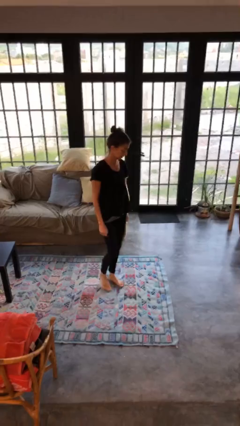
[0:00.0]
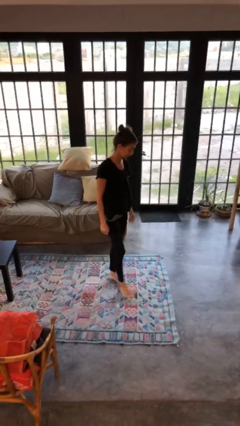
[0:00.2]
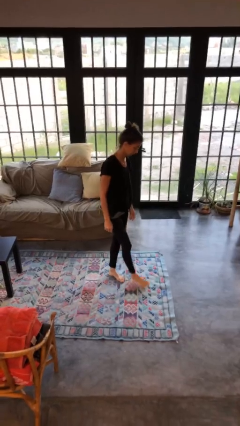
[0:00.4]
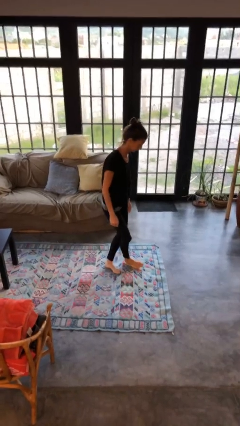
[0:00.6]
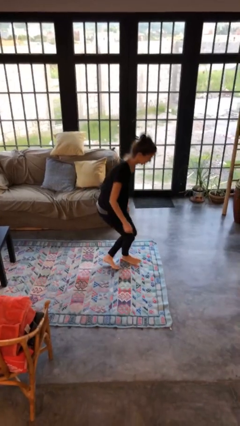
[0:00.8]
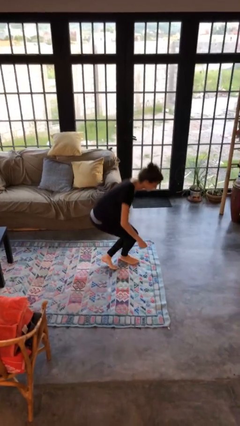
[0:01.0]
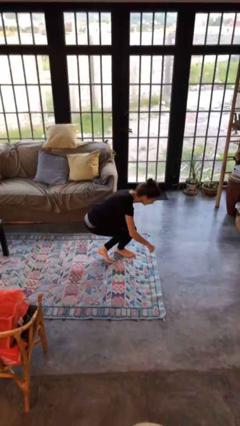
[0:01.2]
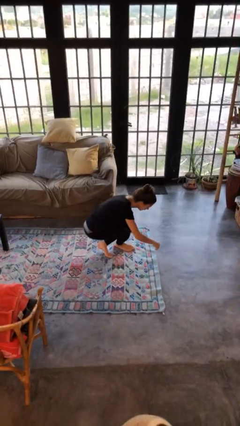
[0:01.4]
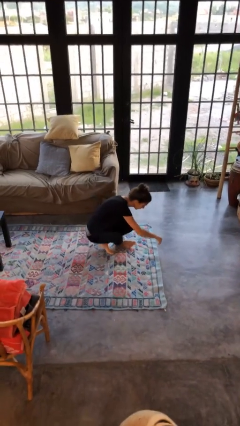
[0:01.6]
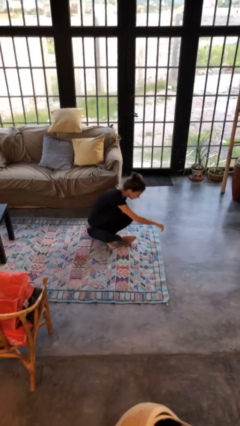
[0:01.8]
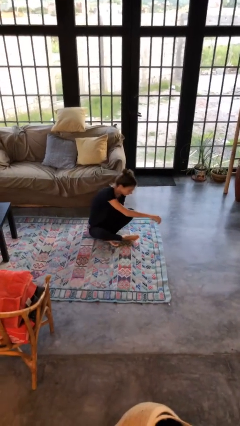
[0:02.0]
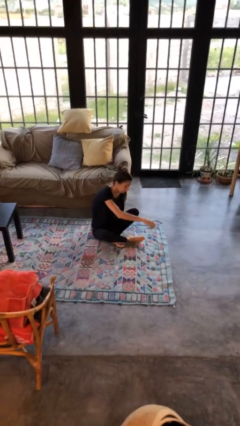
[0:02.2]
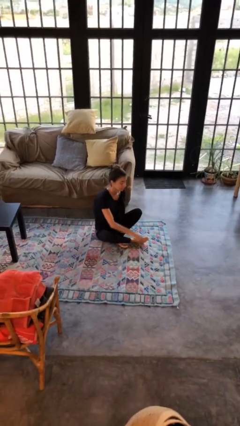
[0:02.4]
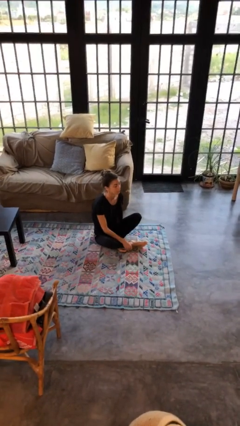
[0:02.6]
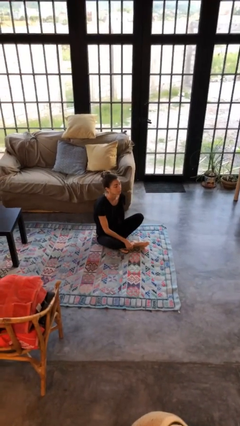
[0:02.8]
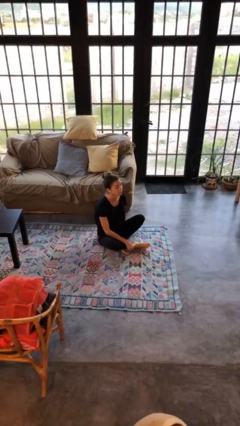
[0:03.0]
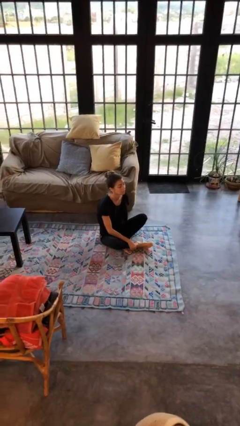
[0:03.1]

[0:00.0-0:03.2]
person sits crisscross

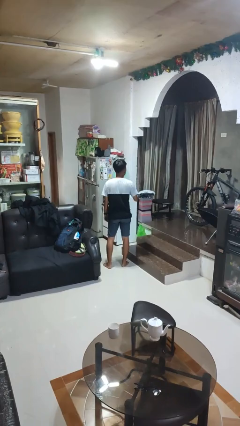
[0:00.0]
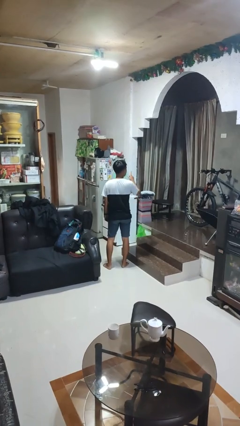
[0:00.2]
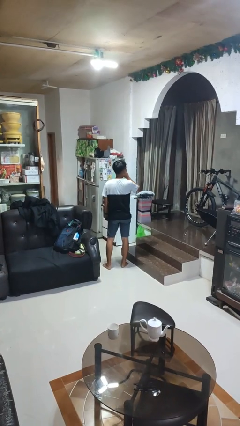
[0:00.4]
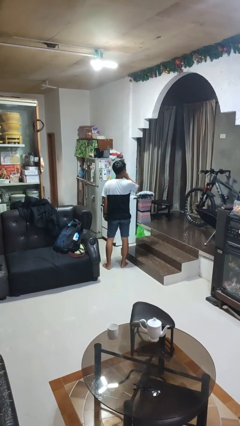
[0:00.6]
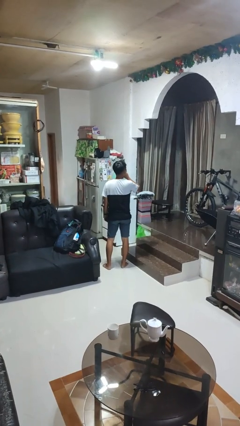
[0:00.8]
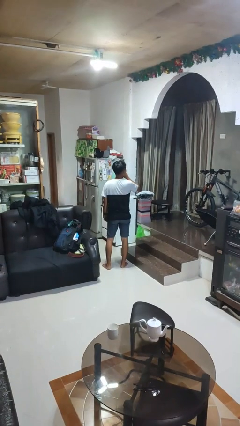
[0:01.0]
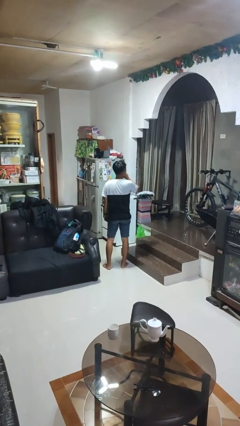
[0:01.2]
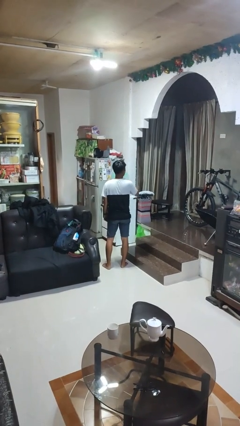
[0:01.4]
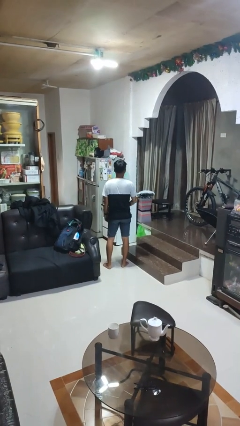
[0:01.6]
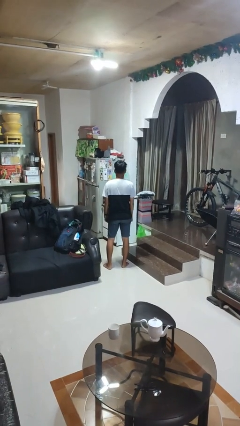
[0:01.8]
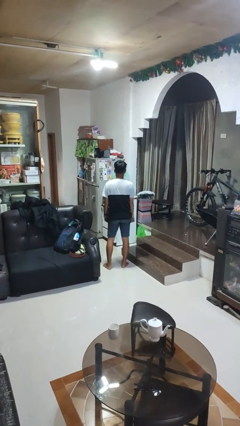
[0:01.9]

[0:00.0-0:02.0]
person gestures be quiet

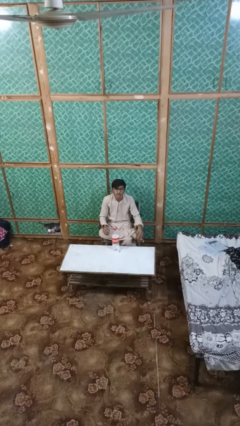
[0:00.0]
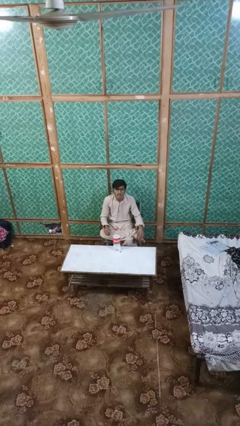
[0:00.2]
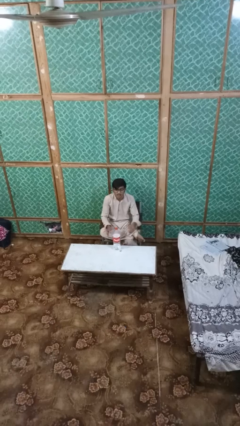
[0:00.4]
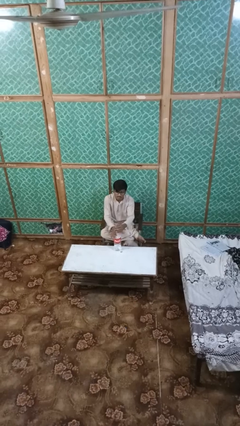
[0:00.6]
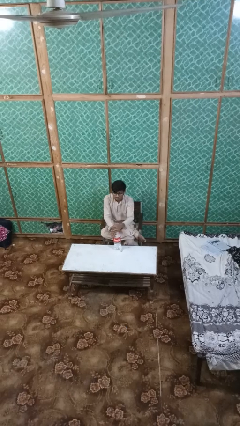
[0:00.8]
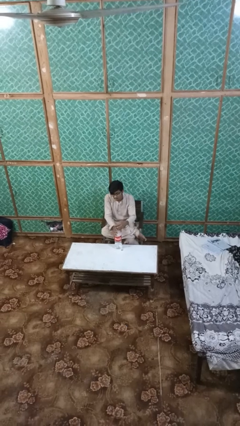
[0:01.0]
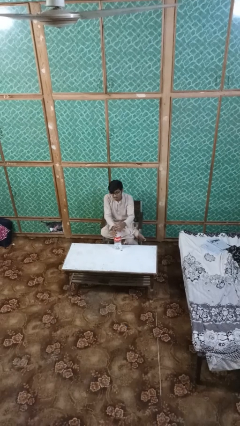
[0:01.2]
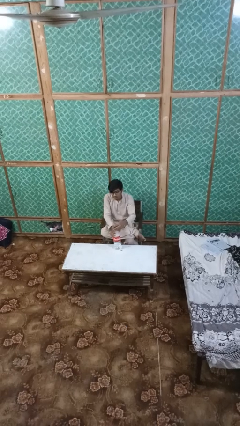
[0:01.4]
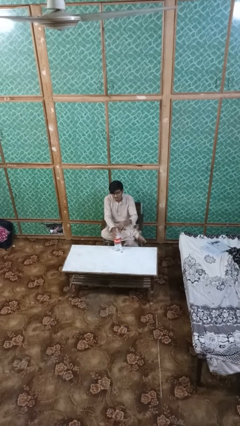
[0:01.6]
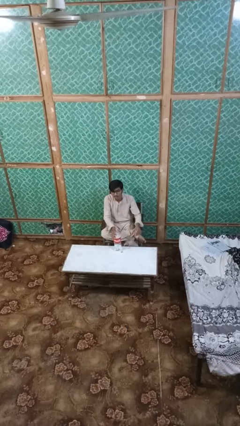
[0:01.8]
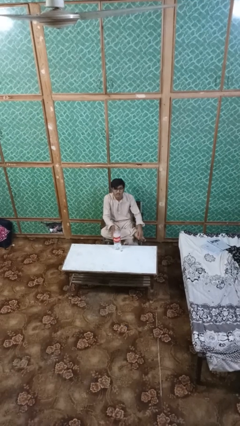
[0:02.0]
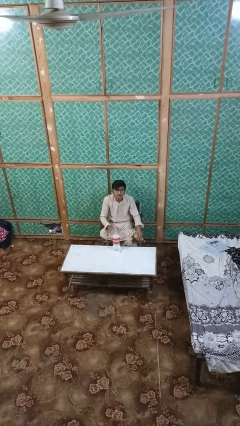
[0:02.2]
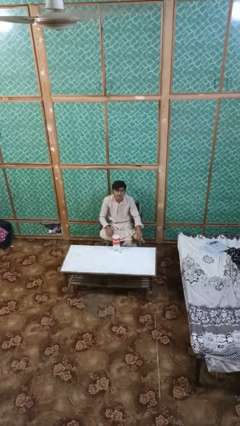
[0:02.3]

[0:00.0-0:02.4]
person unscrews lid from bottle

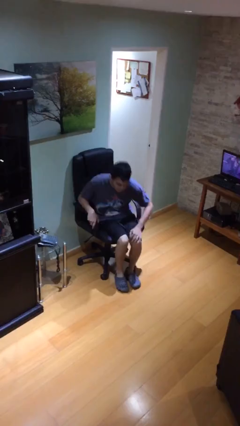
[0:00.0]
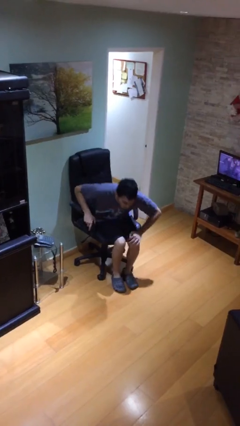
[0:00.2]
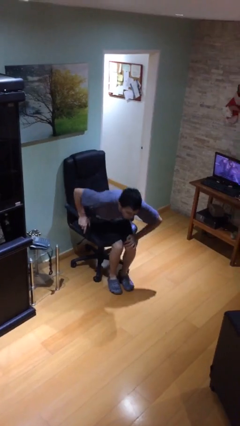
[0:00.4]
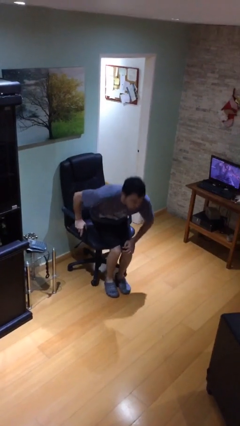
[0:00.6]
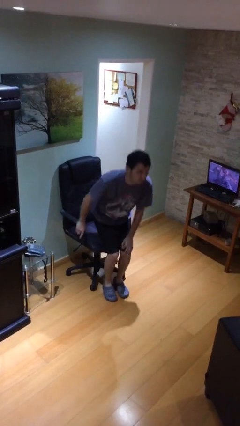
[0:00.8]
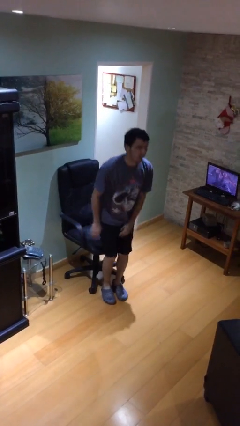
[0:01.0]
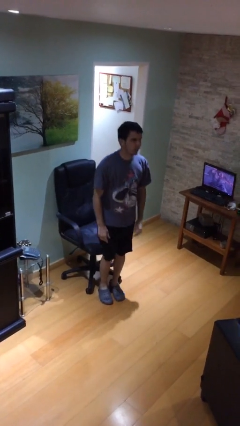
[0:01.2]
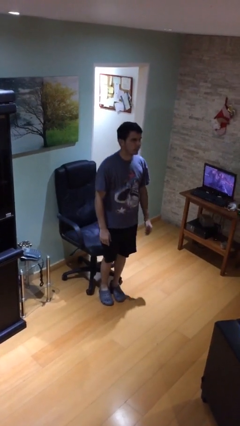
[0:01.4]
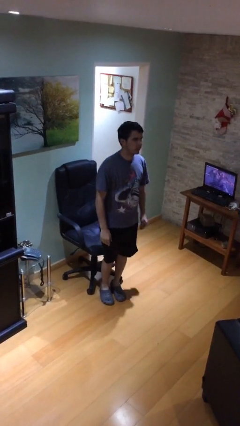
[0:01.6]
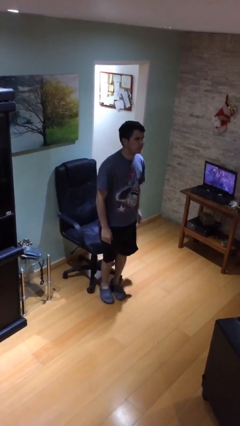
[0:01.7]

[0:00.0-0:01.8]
person stands up

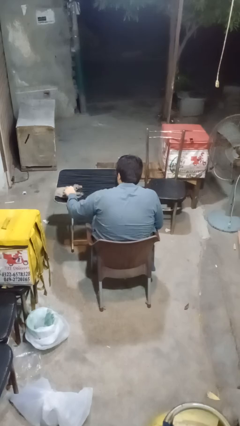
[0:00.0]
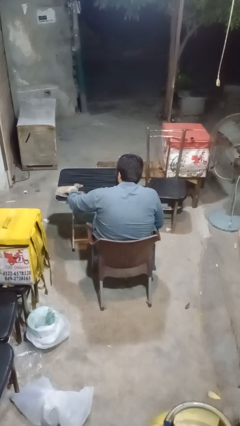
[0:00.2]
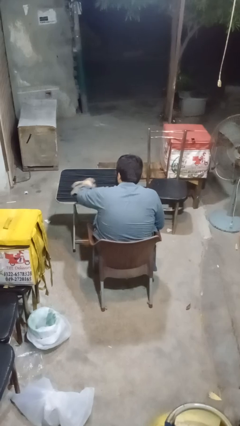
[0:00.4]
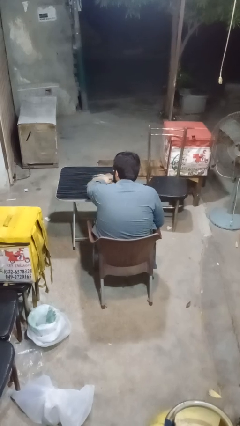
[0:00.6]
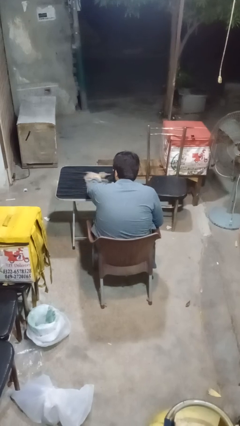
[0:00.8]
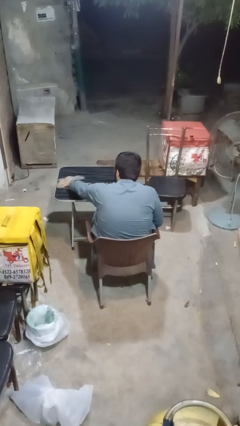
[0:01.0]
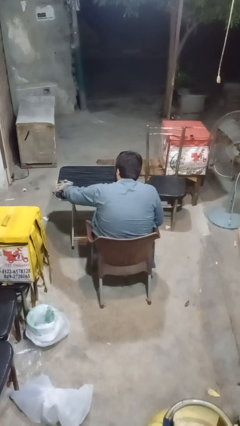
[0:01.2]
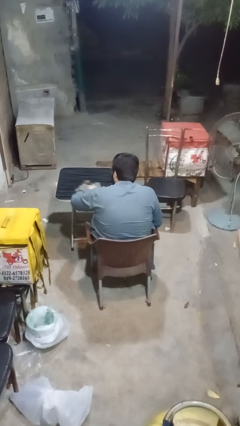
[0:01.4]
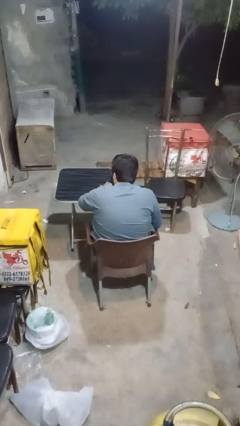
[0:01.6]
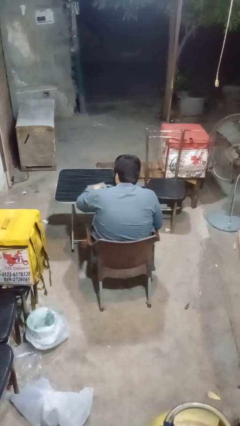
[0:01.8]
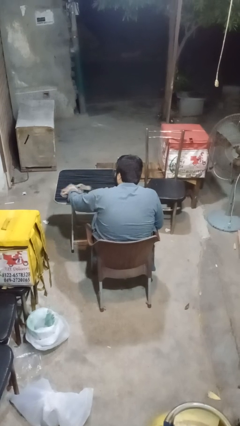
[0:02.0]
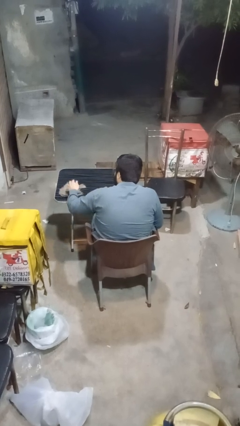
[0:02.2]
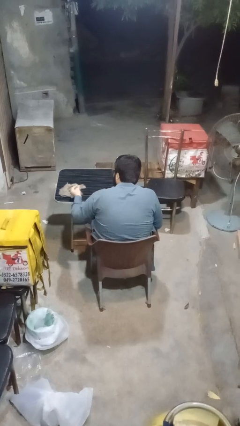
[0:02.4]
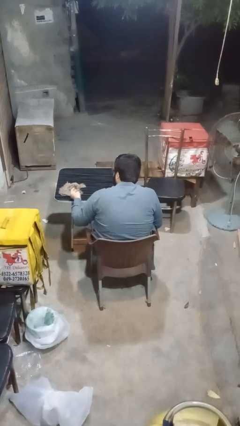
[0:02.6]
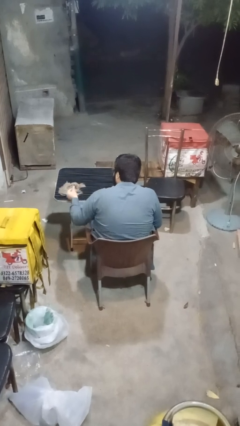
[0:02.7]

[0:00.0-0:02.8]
person cleans table with rag

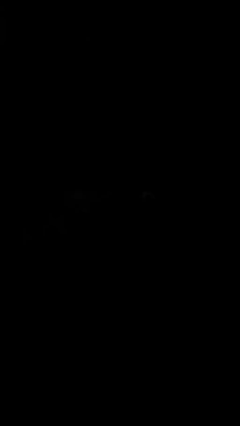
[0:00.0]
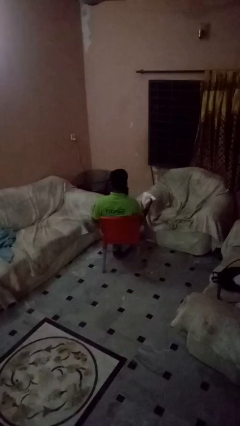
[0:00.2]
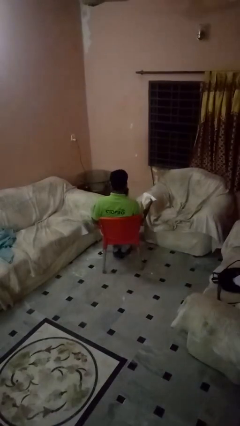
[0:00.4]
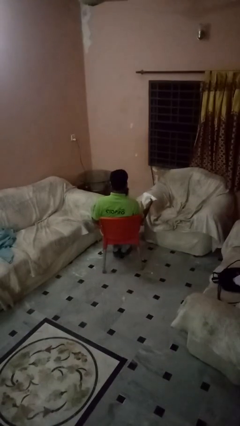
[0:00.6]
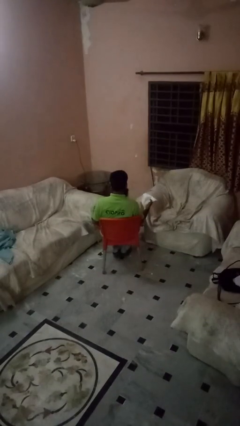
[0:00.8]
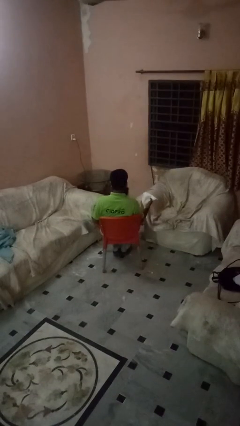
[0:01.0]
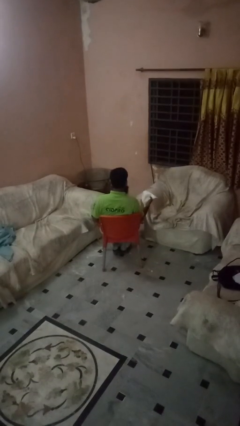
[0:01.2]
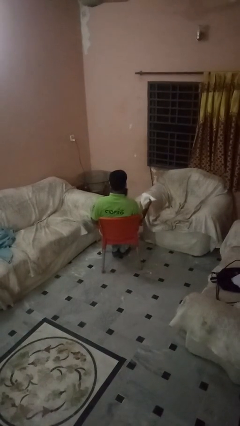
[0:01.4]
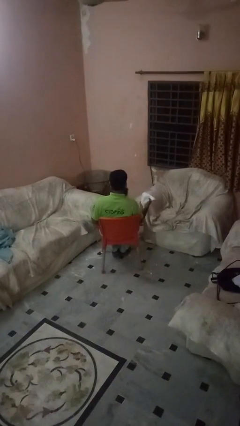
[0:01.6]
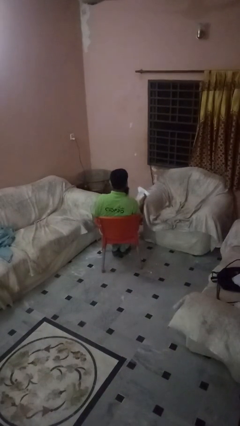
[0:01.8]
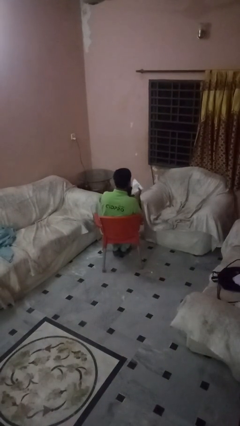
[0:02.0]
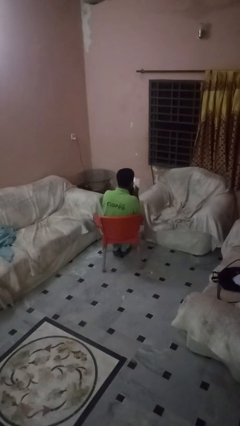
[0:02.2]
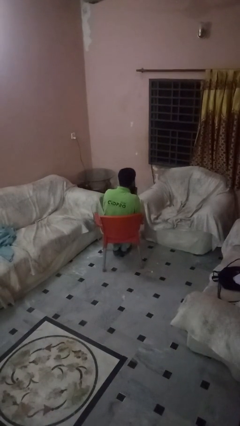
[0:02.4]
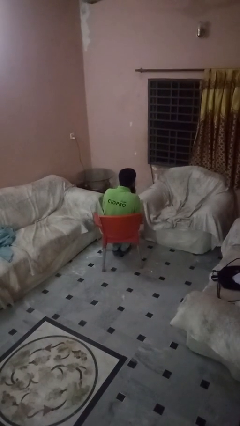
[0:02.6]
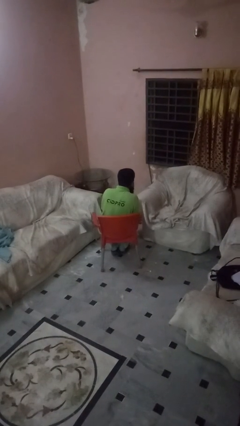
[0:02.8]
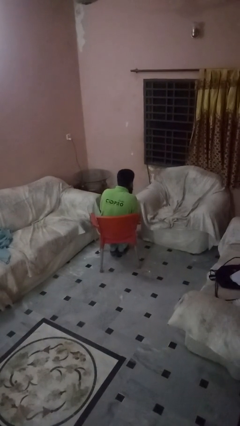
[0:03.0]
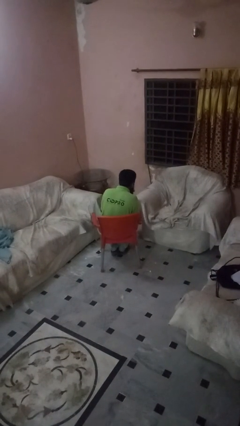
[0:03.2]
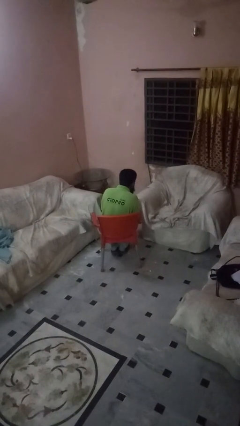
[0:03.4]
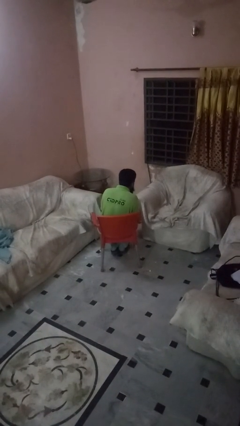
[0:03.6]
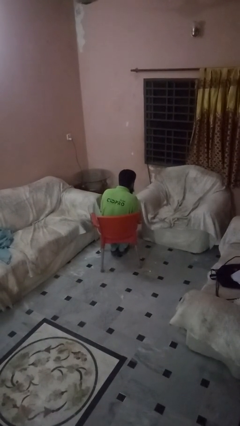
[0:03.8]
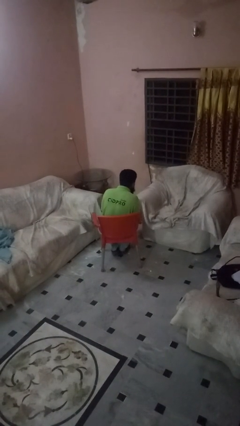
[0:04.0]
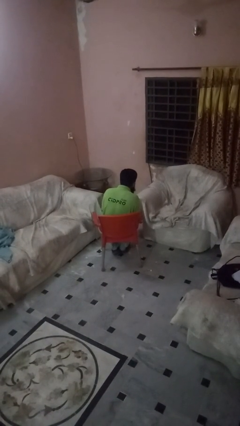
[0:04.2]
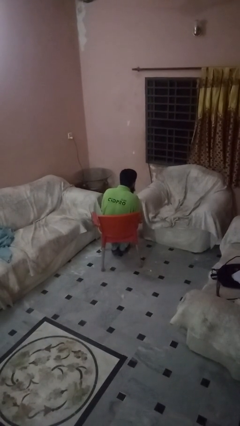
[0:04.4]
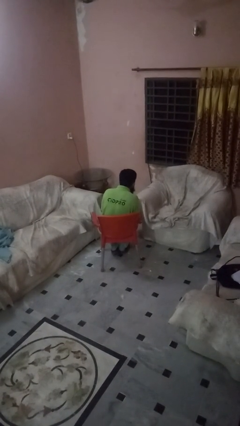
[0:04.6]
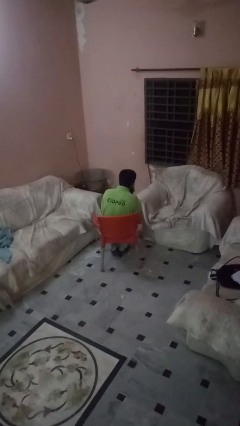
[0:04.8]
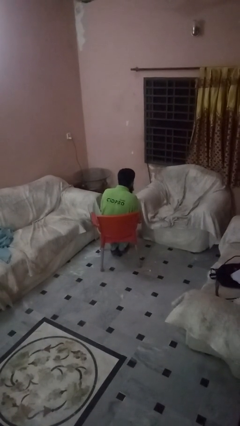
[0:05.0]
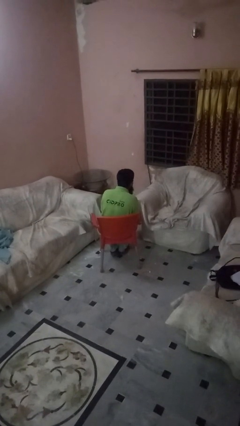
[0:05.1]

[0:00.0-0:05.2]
person blows nose
